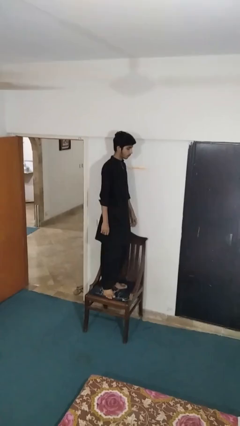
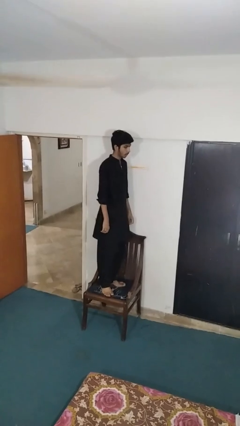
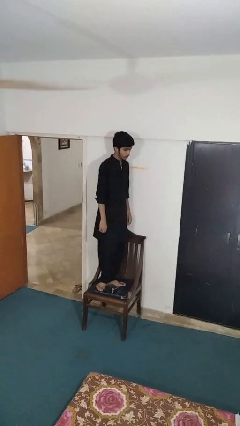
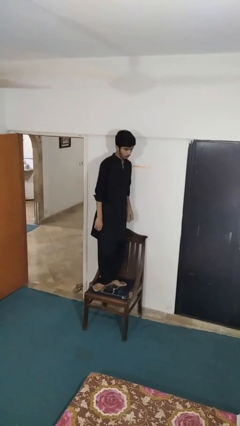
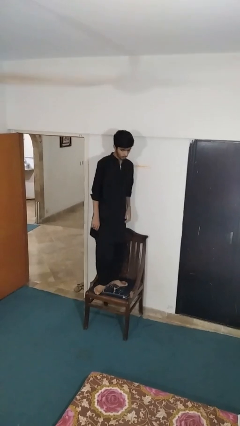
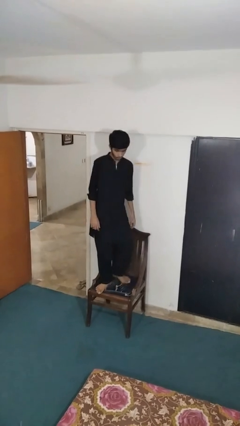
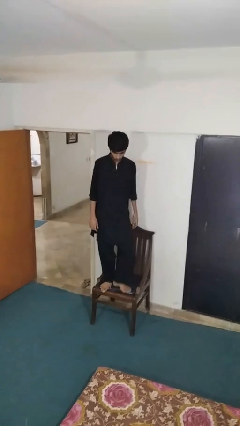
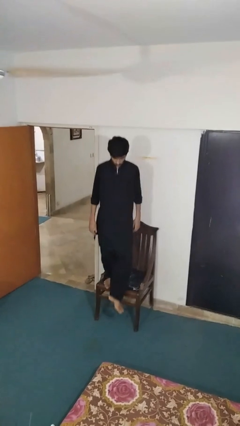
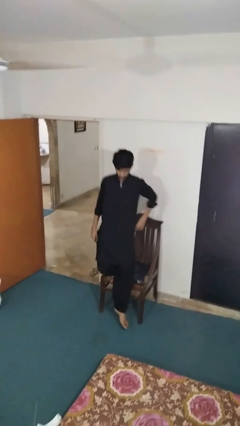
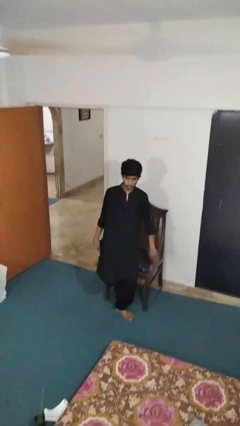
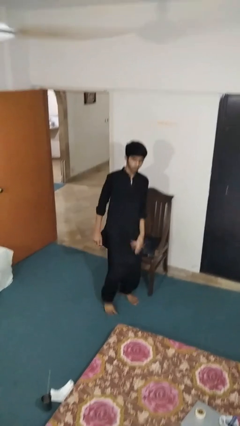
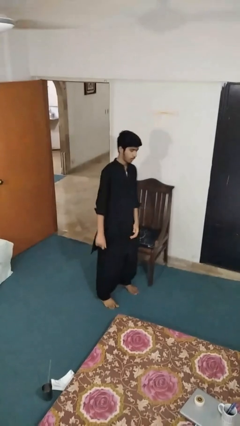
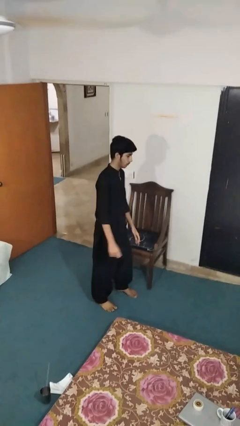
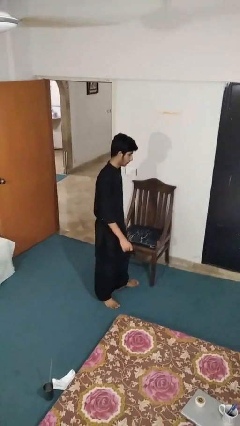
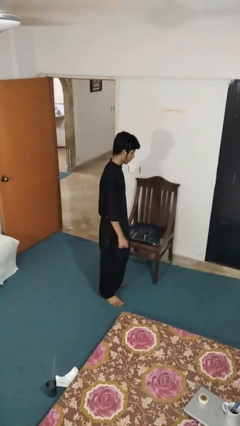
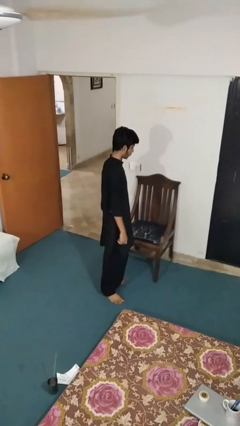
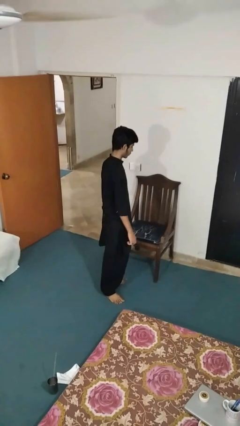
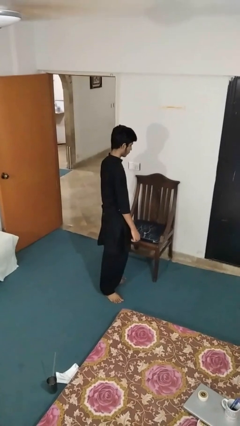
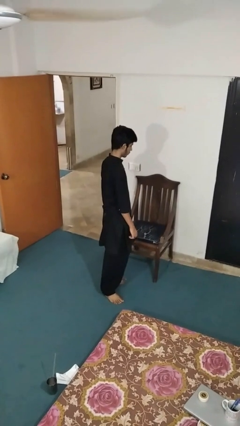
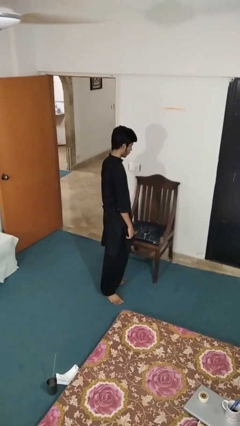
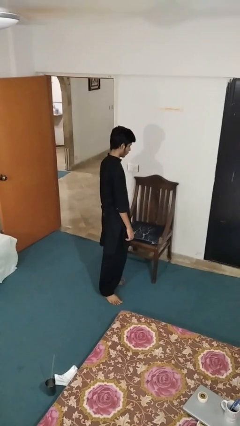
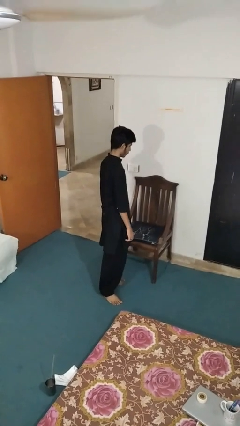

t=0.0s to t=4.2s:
person climbs off chair

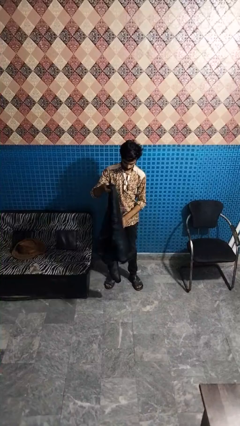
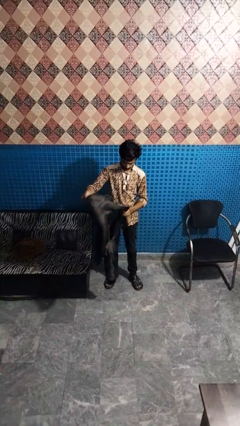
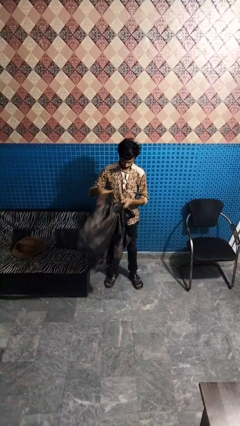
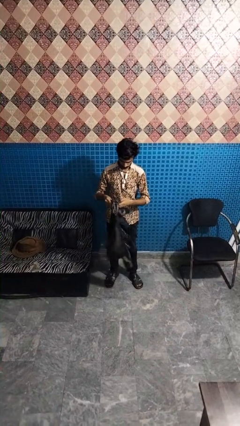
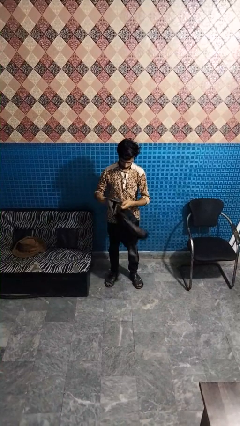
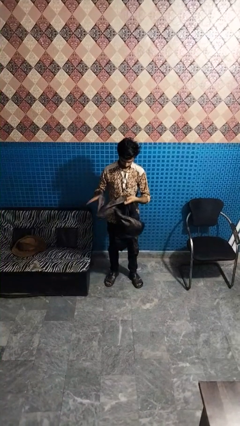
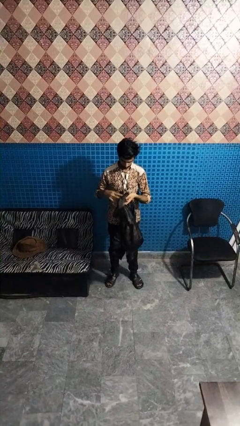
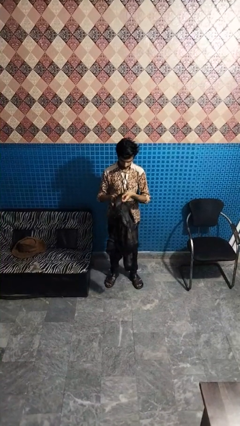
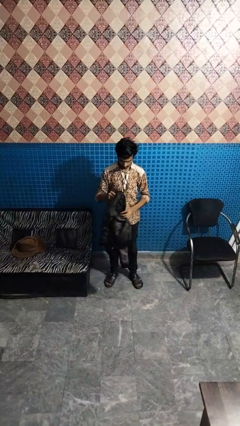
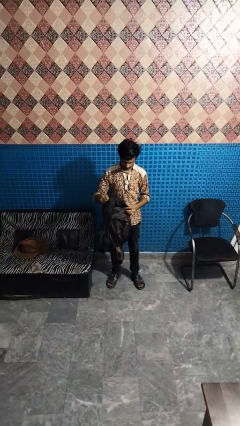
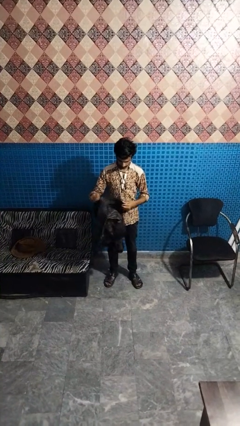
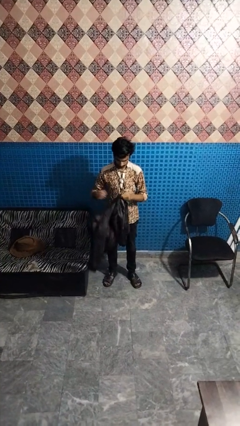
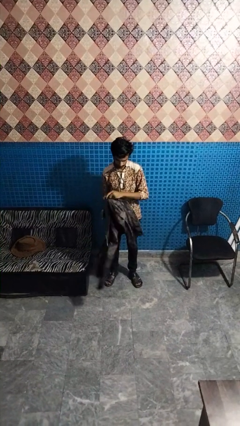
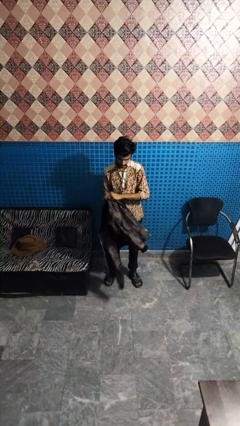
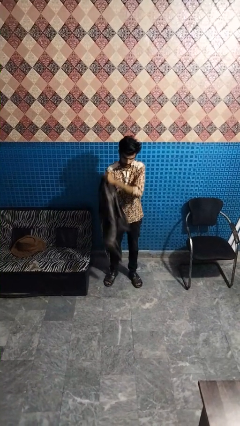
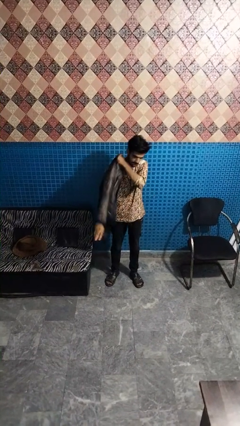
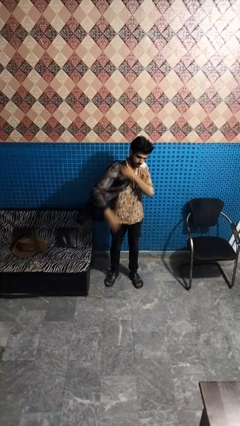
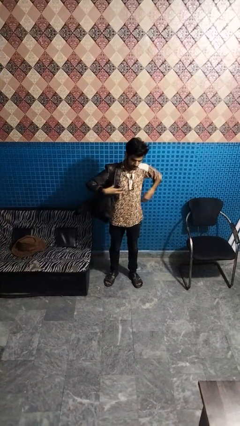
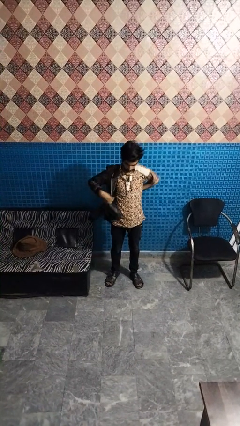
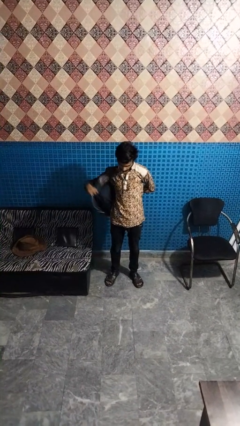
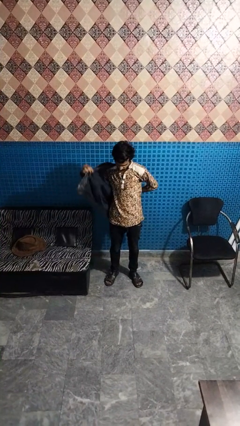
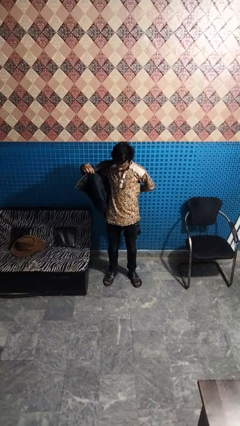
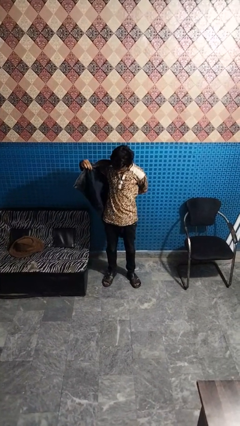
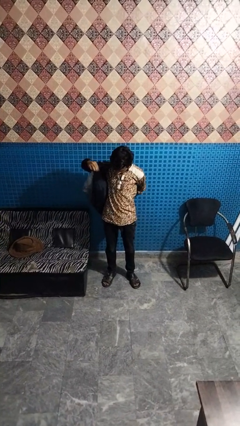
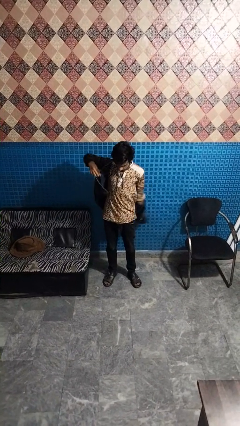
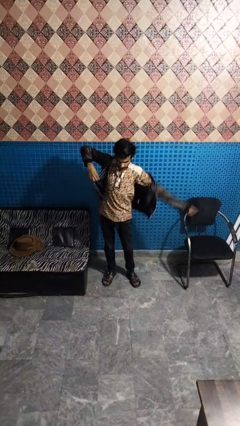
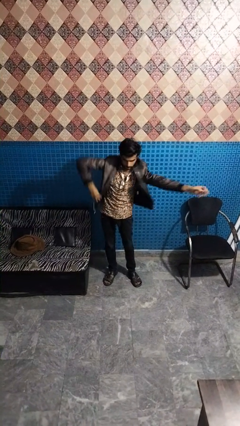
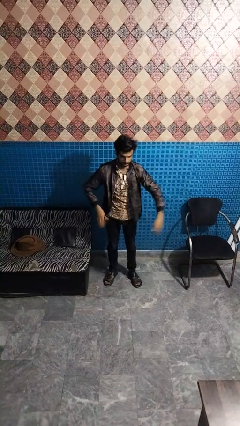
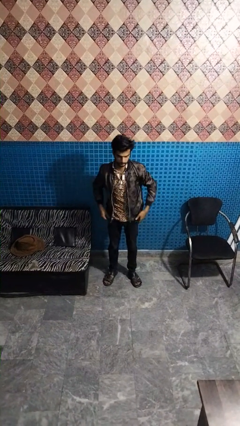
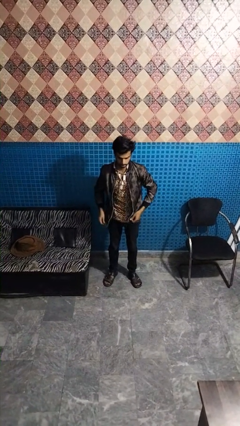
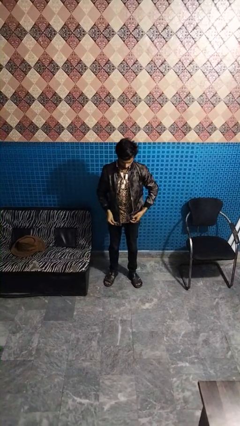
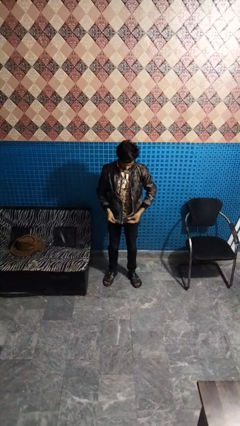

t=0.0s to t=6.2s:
person puts on jacket

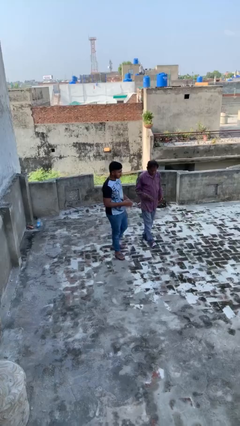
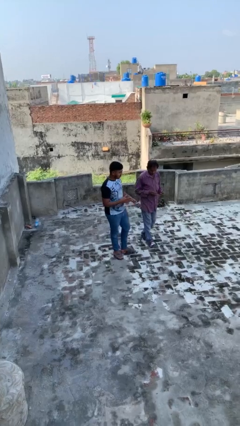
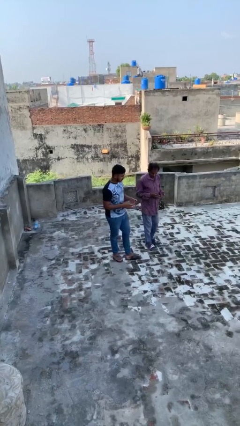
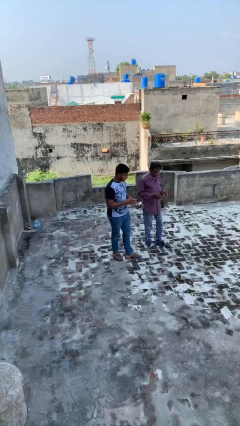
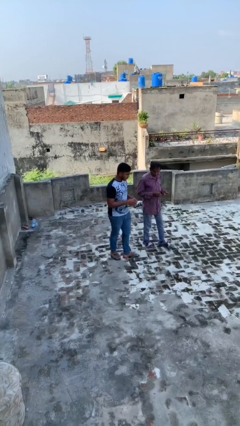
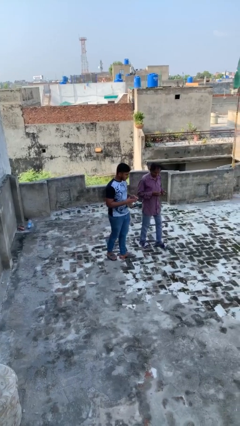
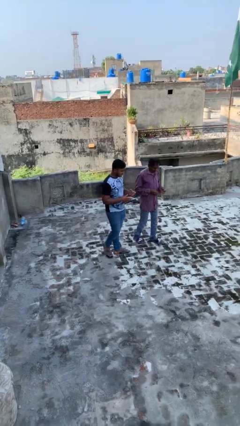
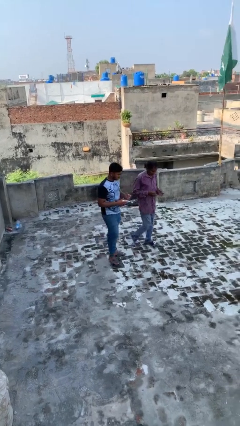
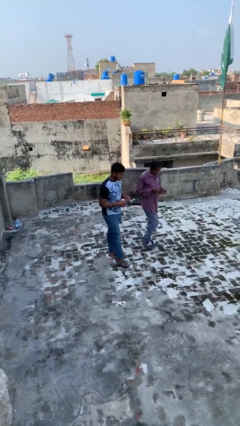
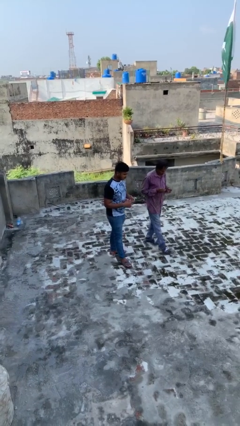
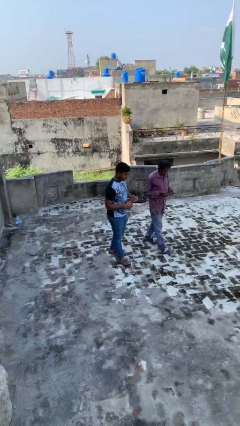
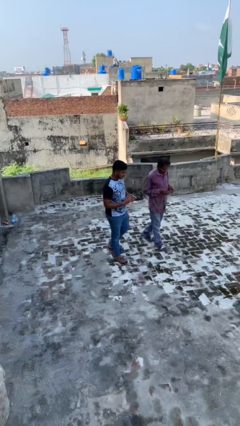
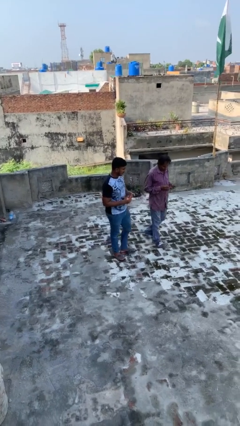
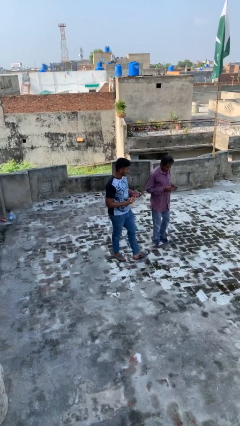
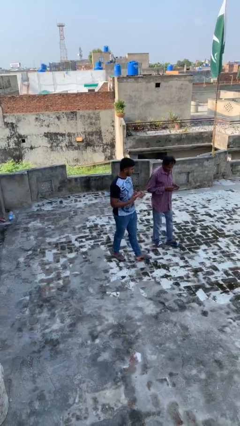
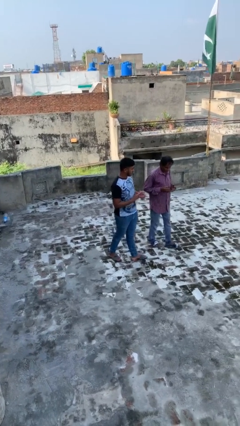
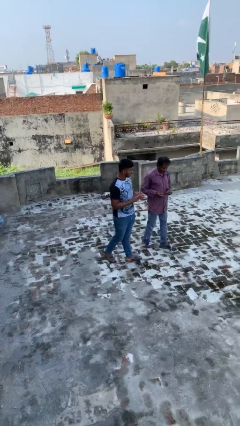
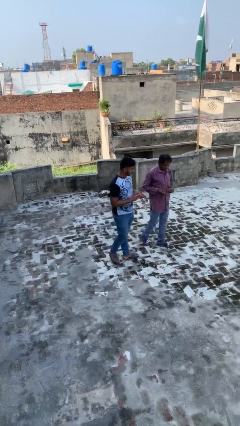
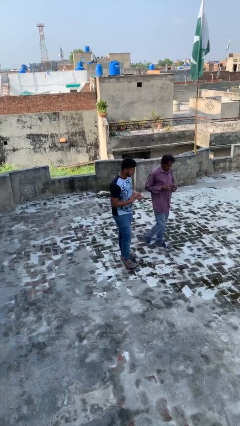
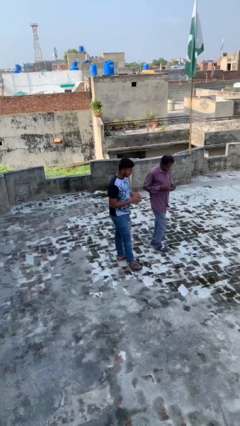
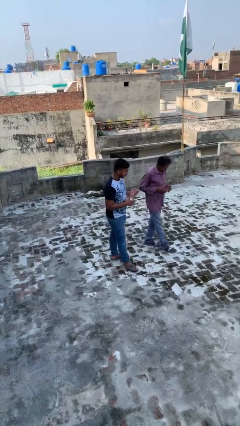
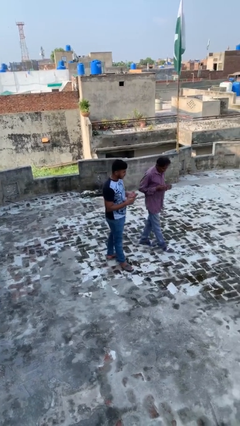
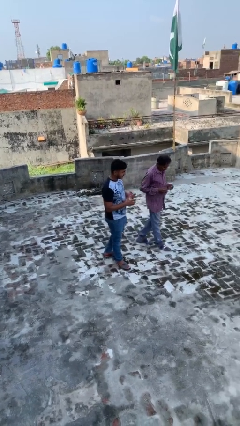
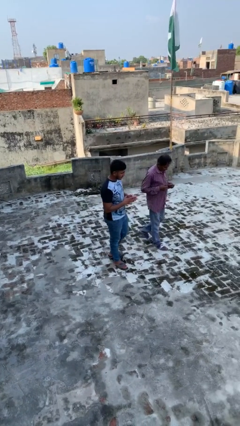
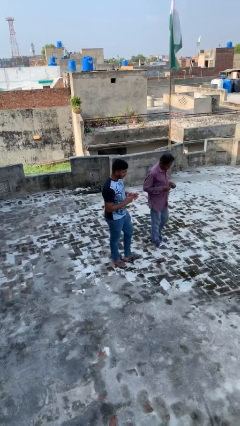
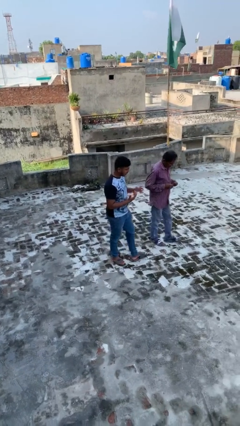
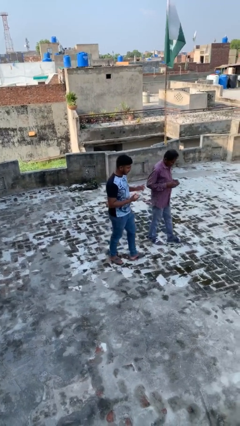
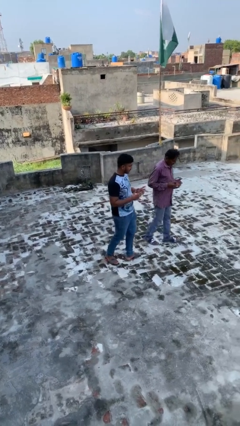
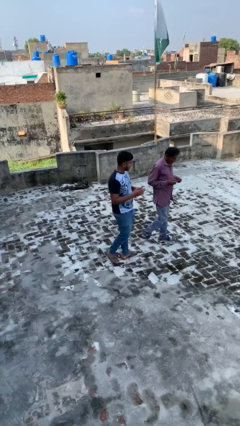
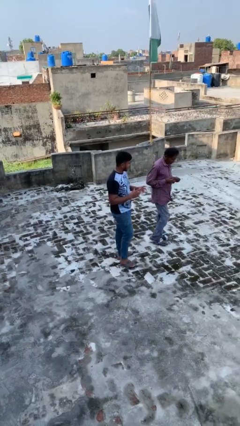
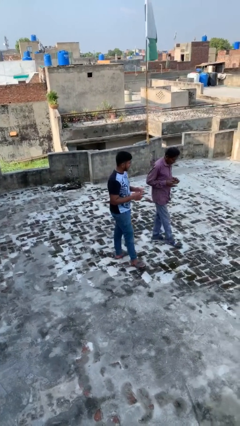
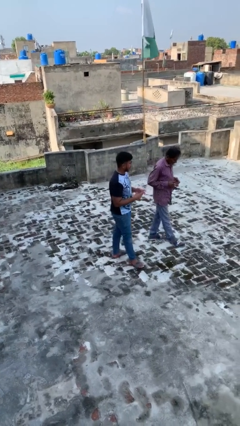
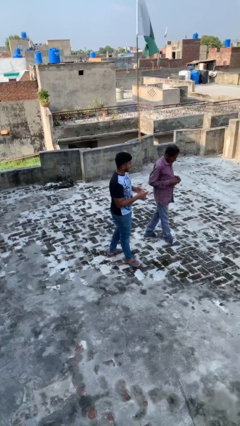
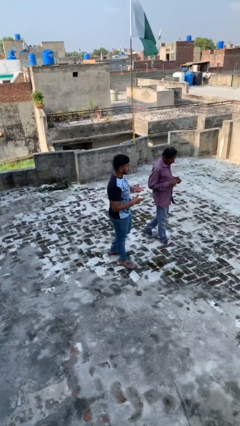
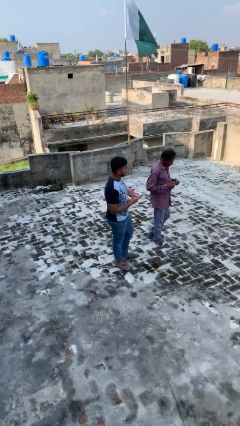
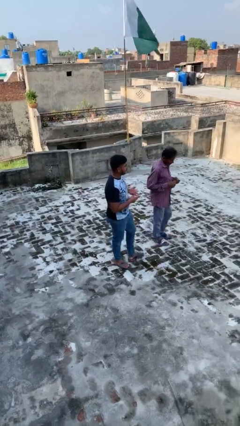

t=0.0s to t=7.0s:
person talks to person
